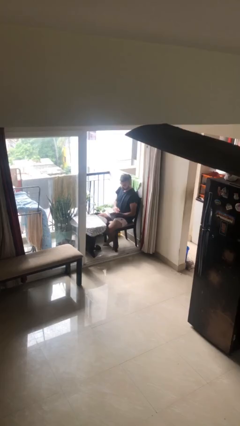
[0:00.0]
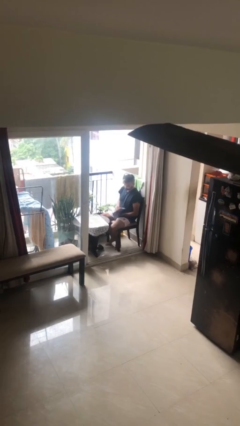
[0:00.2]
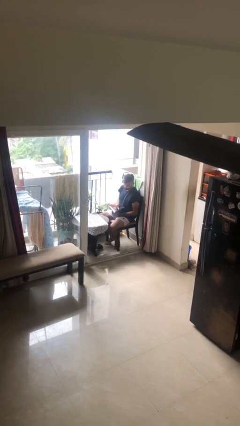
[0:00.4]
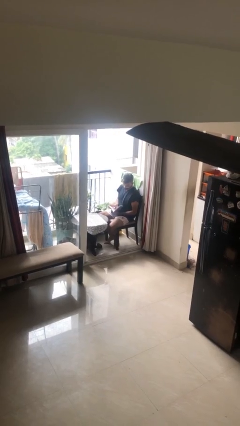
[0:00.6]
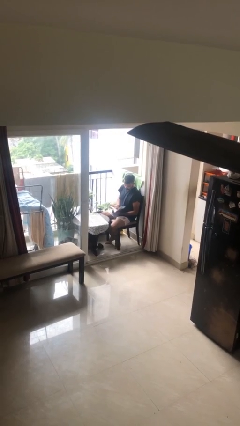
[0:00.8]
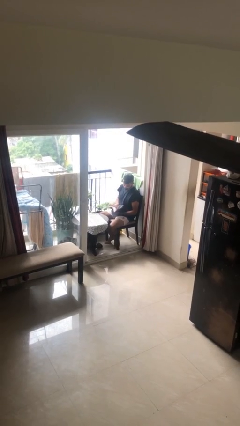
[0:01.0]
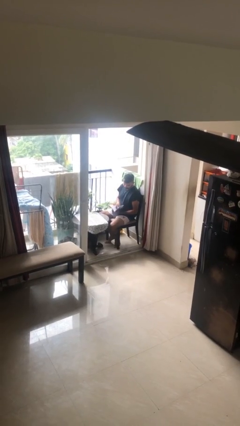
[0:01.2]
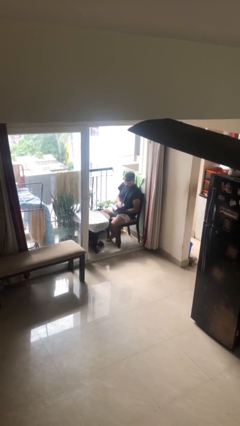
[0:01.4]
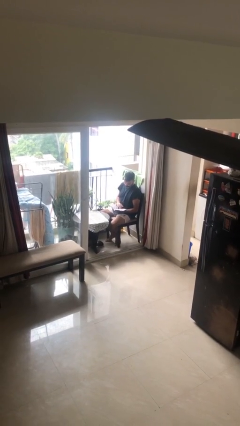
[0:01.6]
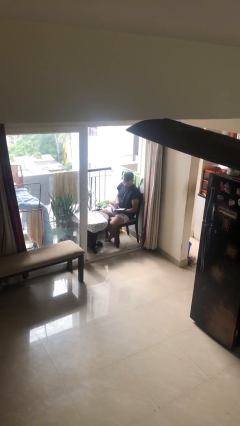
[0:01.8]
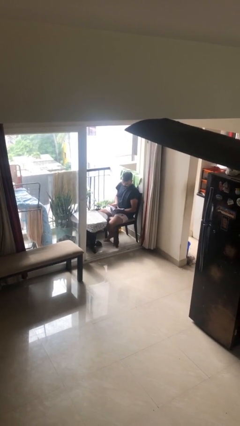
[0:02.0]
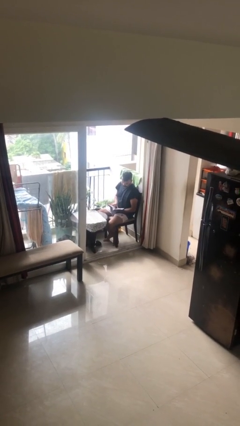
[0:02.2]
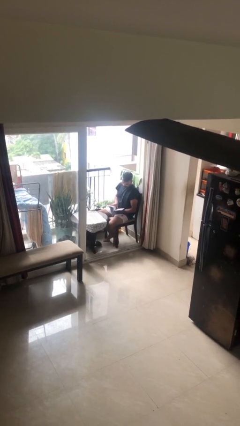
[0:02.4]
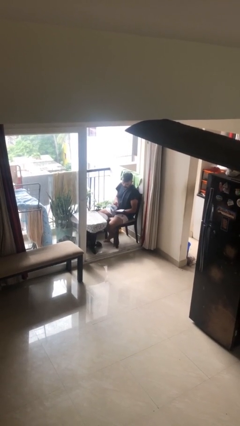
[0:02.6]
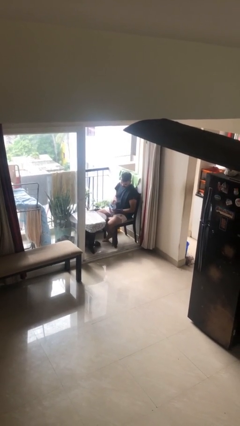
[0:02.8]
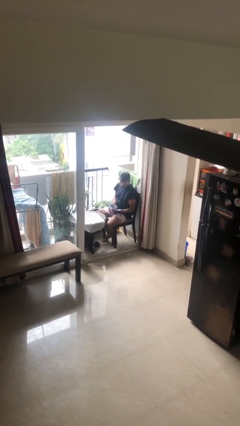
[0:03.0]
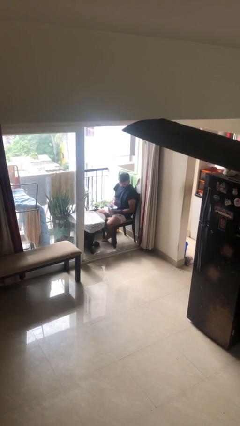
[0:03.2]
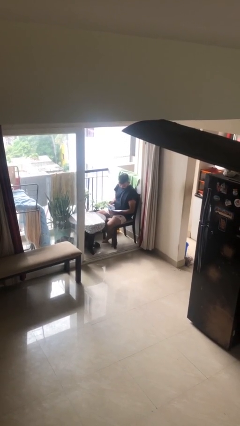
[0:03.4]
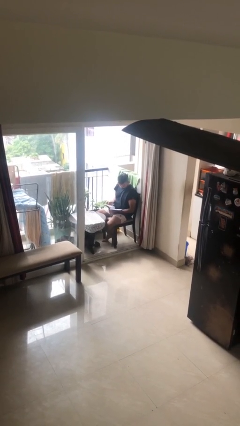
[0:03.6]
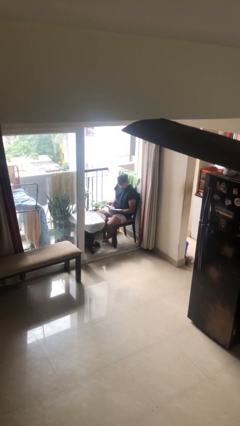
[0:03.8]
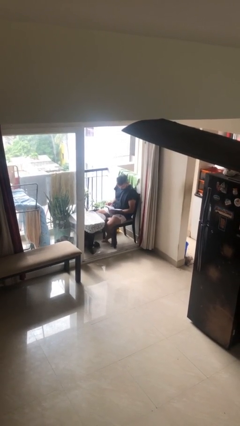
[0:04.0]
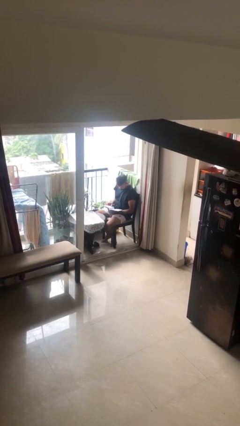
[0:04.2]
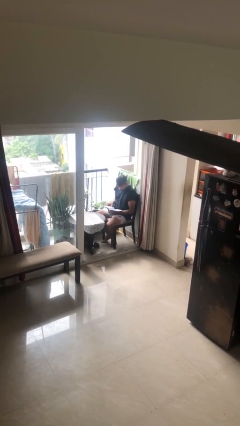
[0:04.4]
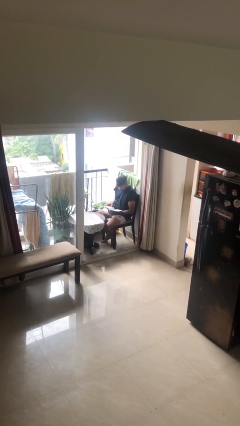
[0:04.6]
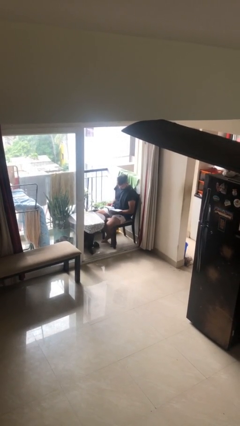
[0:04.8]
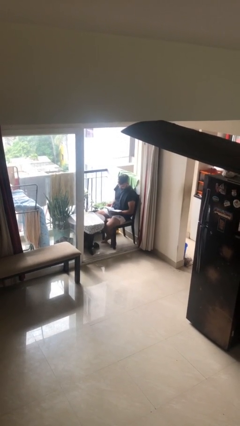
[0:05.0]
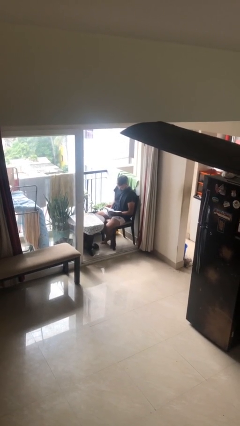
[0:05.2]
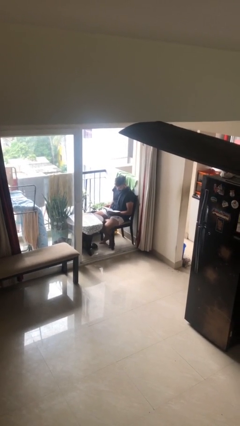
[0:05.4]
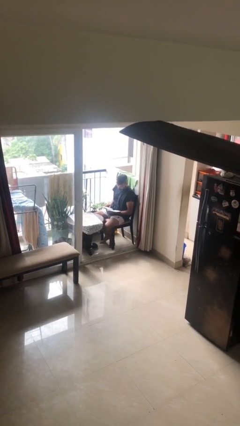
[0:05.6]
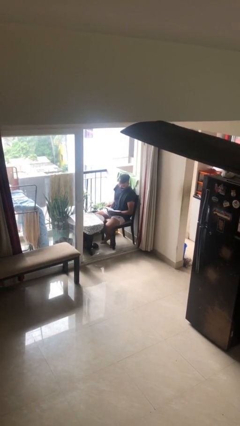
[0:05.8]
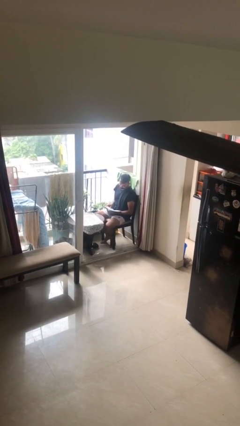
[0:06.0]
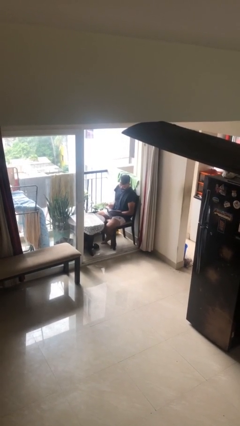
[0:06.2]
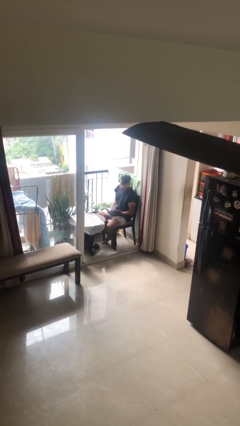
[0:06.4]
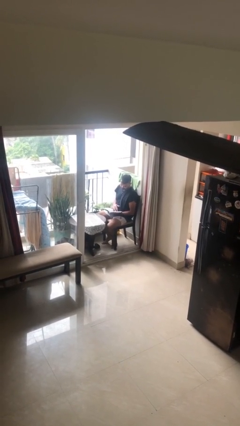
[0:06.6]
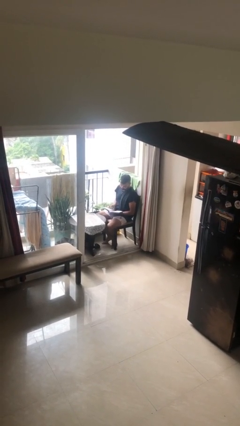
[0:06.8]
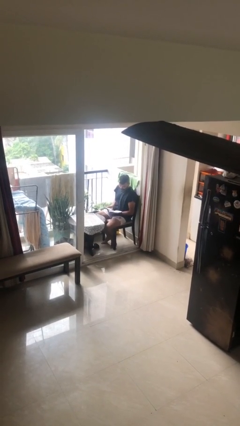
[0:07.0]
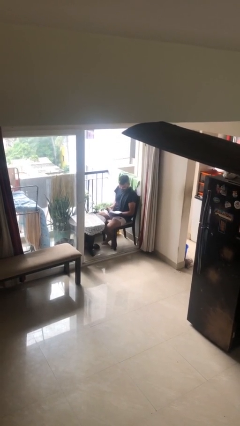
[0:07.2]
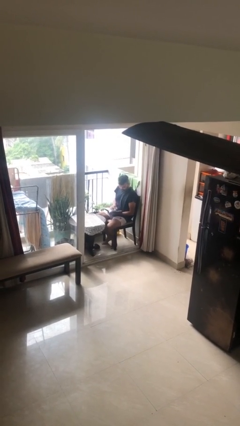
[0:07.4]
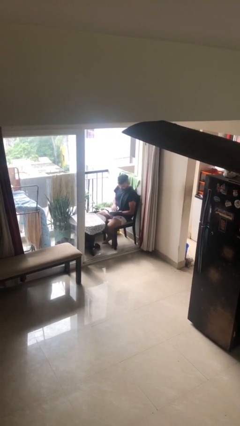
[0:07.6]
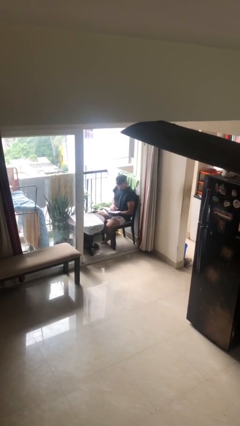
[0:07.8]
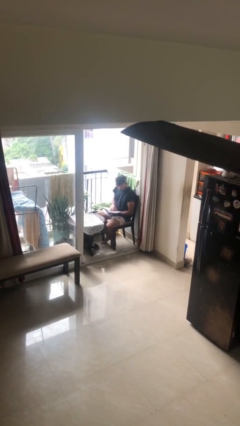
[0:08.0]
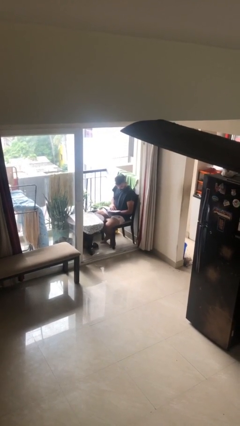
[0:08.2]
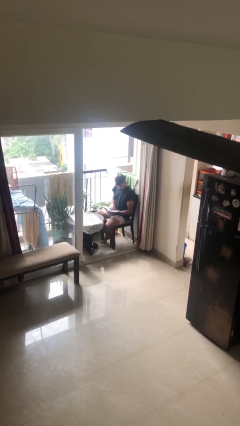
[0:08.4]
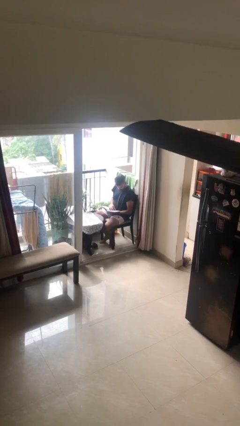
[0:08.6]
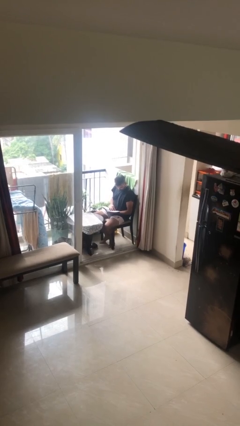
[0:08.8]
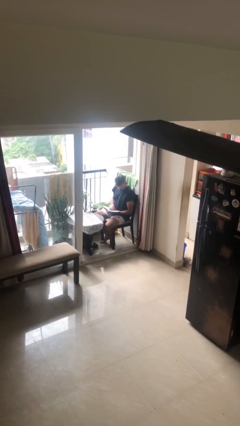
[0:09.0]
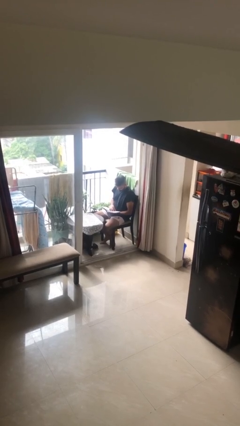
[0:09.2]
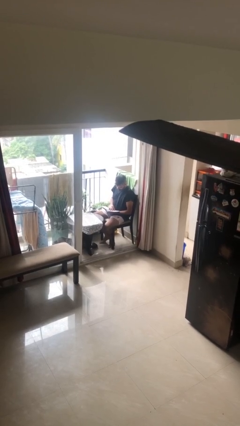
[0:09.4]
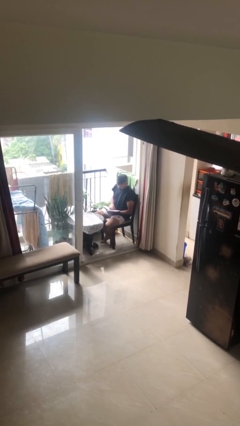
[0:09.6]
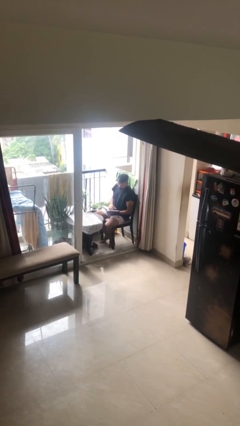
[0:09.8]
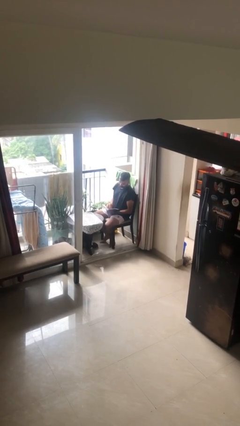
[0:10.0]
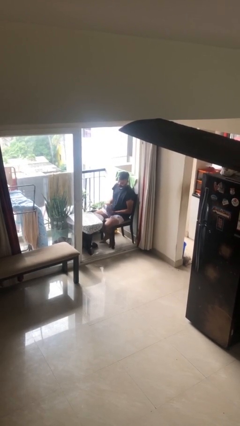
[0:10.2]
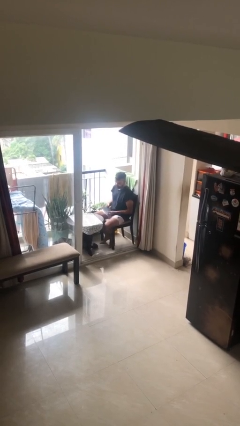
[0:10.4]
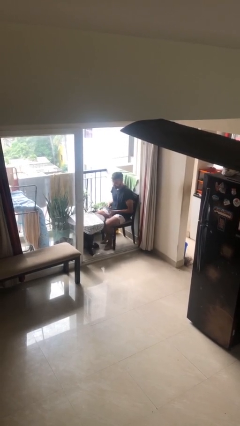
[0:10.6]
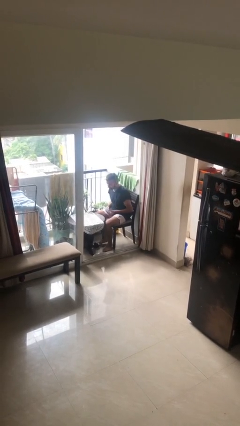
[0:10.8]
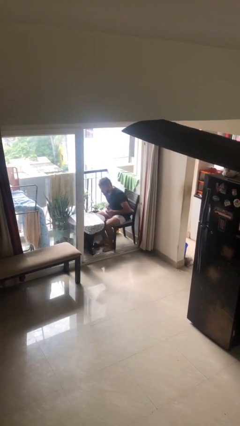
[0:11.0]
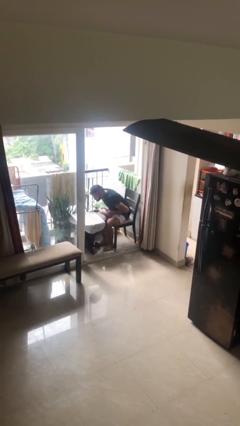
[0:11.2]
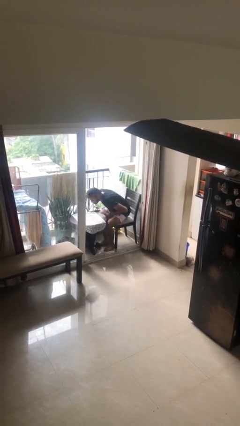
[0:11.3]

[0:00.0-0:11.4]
person reads document

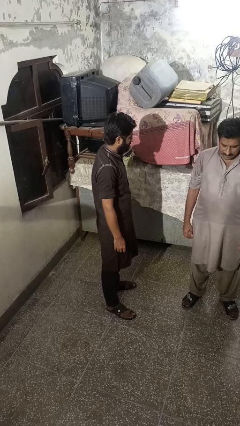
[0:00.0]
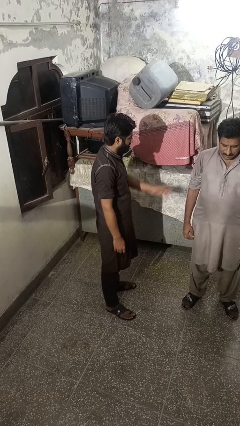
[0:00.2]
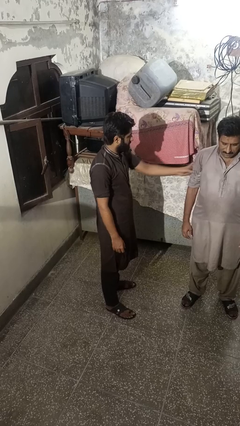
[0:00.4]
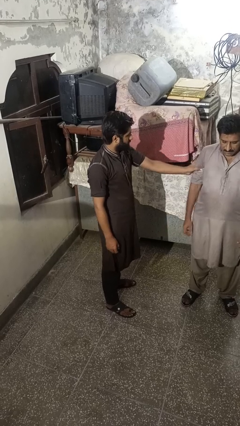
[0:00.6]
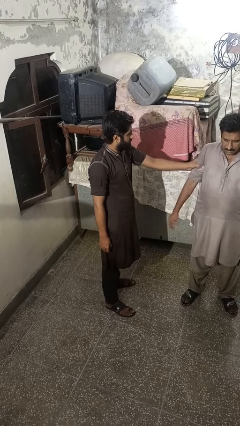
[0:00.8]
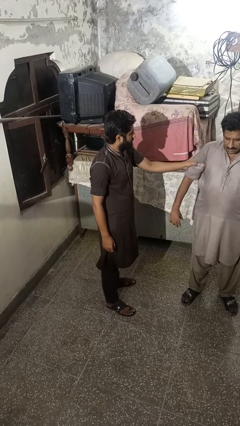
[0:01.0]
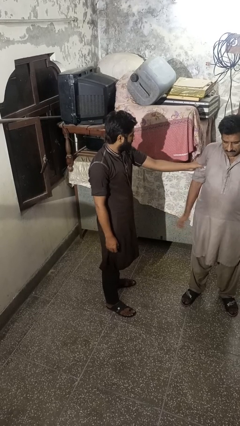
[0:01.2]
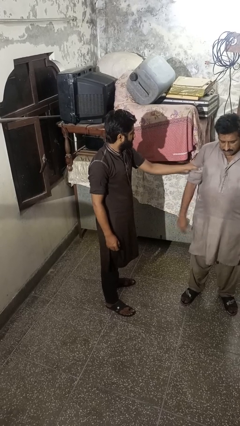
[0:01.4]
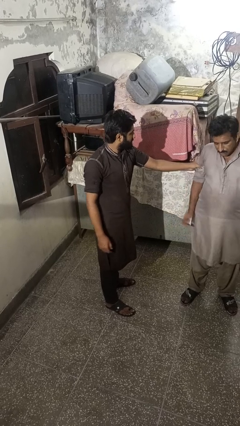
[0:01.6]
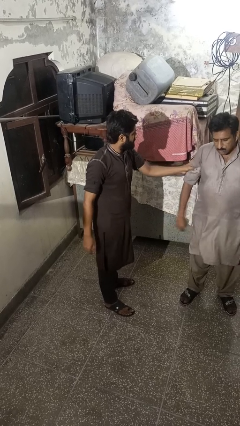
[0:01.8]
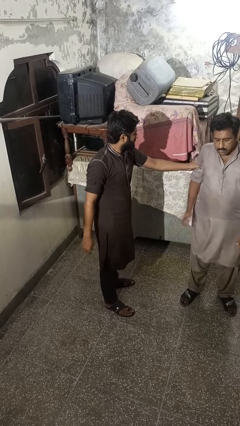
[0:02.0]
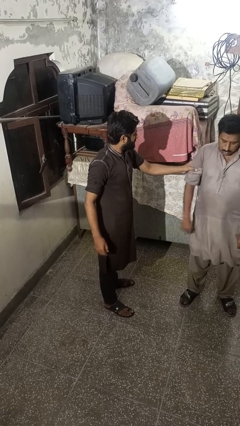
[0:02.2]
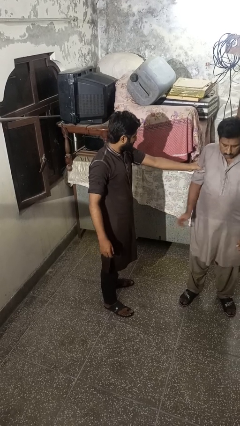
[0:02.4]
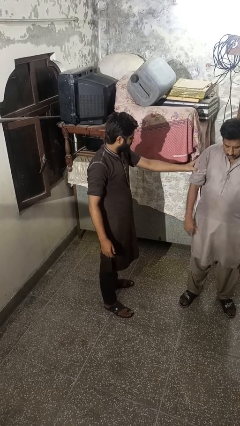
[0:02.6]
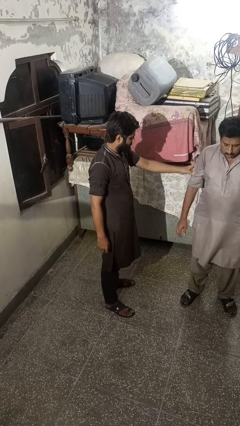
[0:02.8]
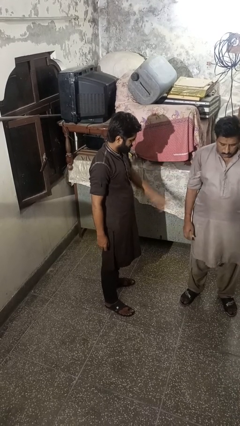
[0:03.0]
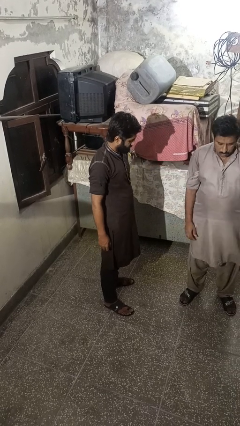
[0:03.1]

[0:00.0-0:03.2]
person grabs person by bicep

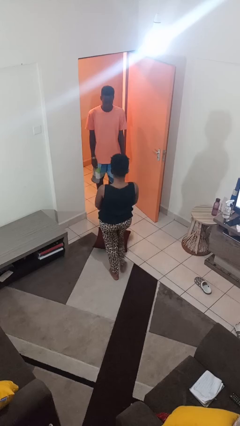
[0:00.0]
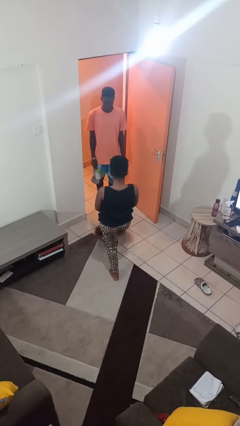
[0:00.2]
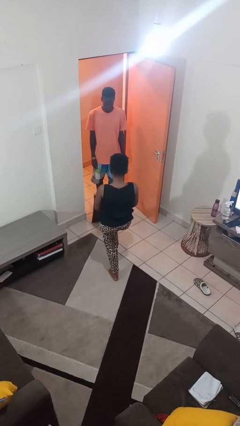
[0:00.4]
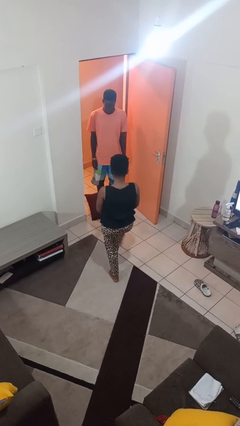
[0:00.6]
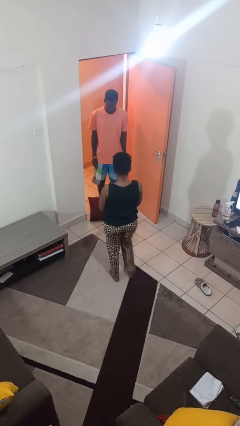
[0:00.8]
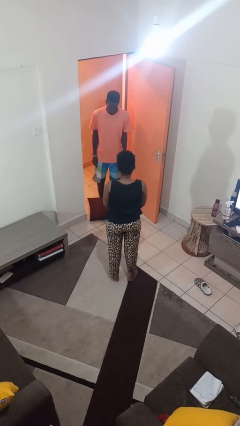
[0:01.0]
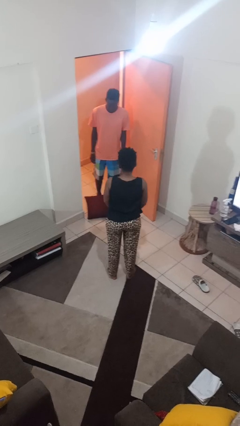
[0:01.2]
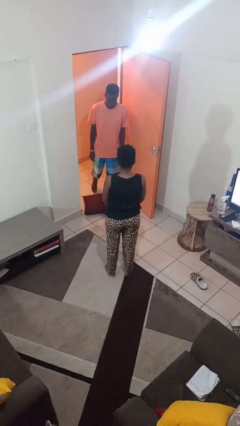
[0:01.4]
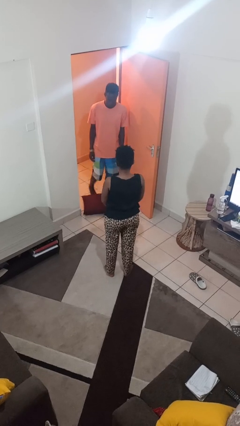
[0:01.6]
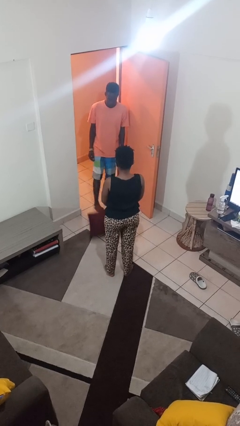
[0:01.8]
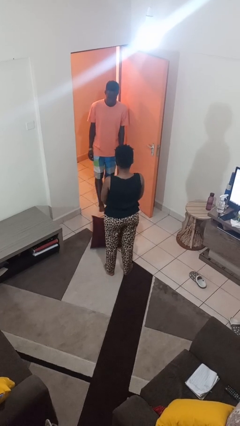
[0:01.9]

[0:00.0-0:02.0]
person kicks object to person

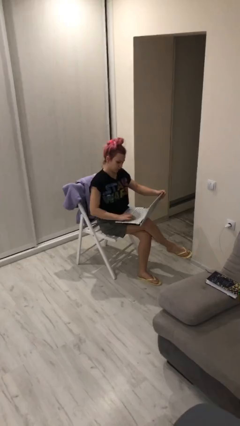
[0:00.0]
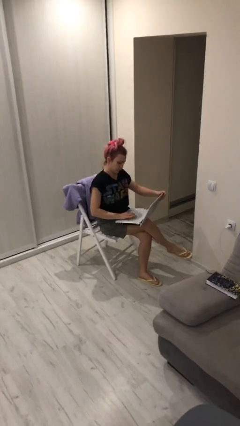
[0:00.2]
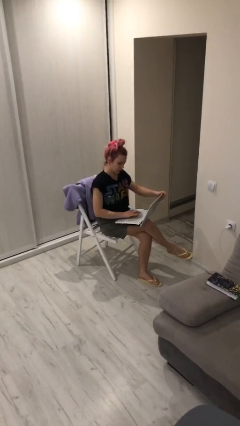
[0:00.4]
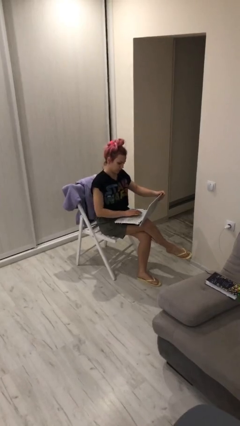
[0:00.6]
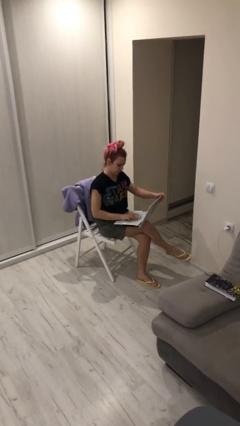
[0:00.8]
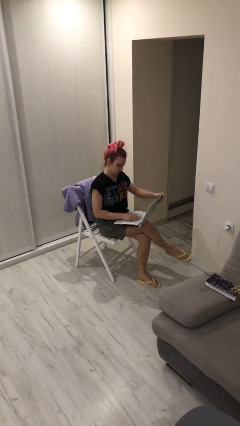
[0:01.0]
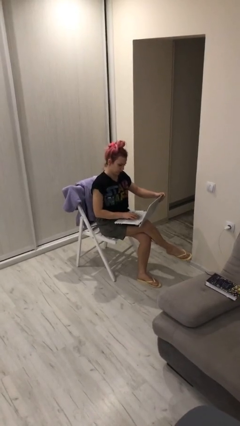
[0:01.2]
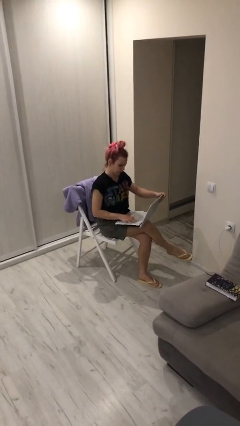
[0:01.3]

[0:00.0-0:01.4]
person interacts with laptop
